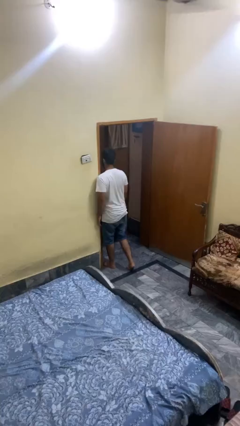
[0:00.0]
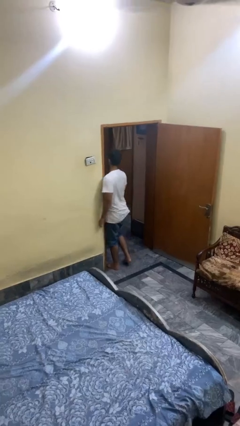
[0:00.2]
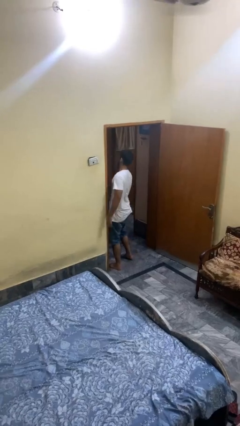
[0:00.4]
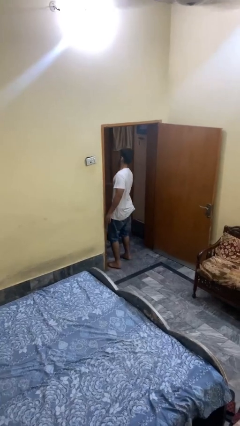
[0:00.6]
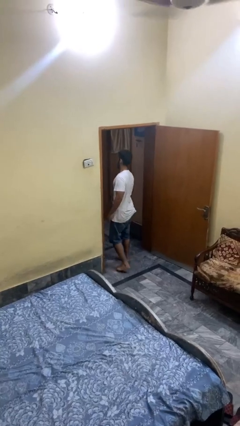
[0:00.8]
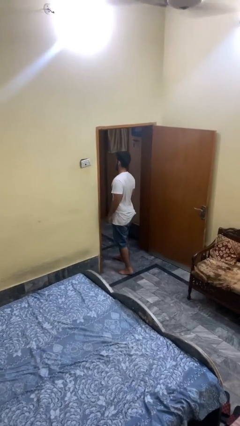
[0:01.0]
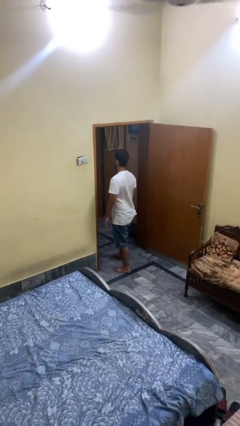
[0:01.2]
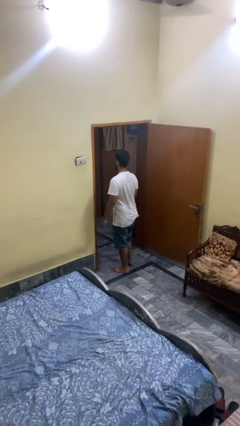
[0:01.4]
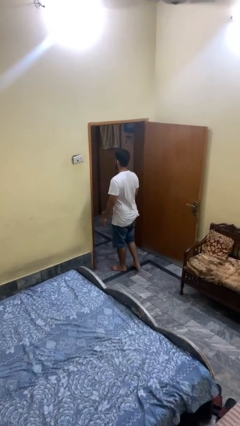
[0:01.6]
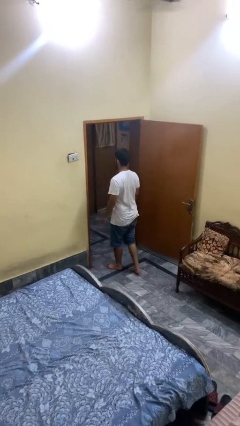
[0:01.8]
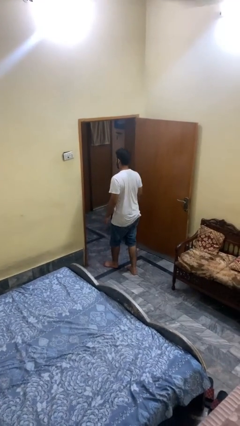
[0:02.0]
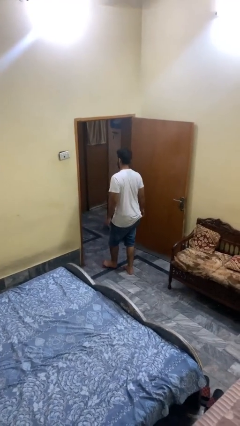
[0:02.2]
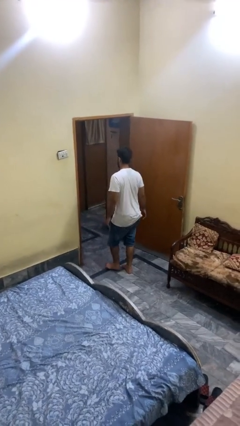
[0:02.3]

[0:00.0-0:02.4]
person bumps into wall

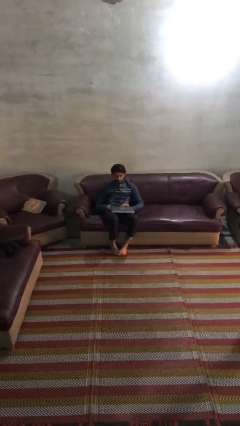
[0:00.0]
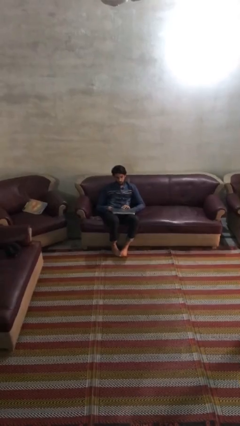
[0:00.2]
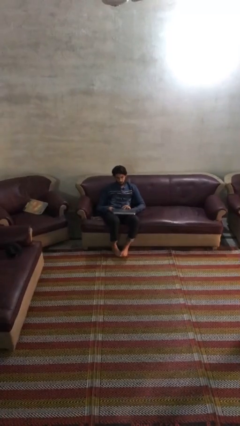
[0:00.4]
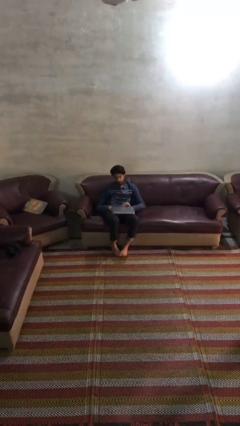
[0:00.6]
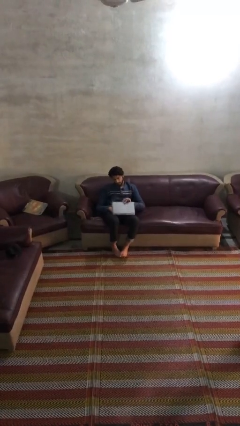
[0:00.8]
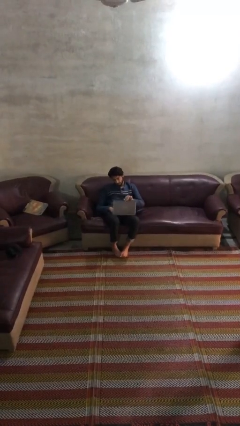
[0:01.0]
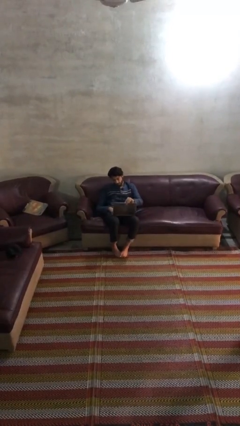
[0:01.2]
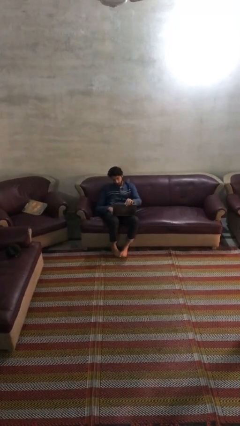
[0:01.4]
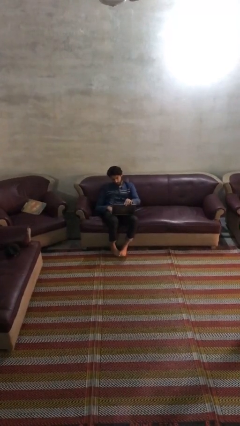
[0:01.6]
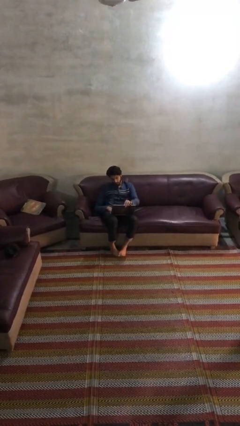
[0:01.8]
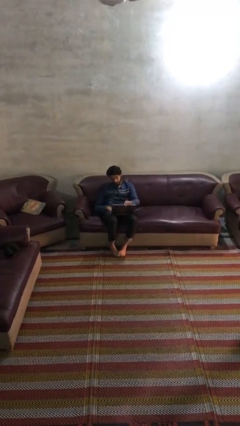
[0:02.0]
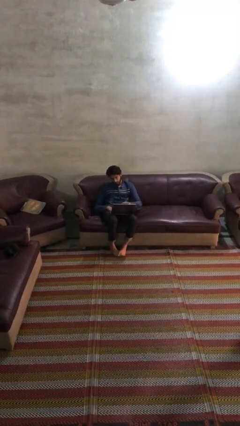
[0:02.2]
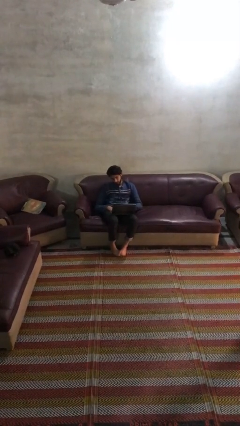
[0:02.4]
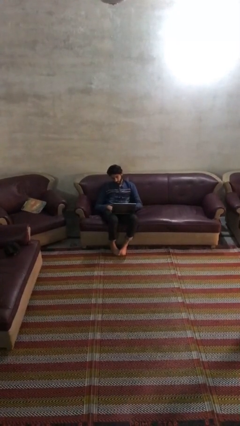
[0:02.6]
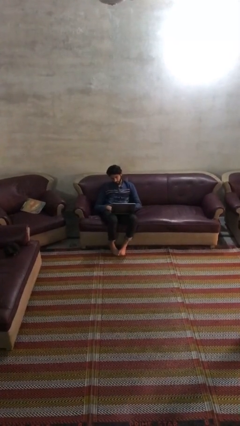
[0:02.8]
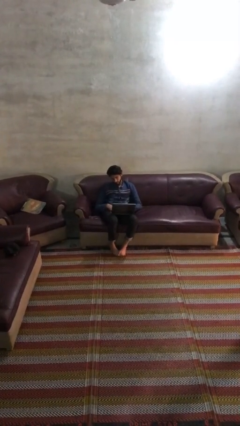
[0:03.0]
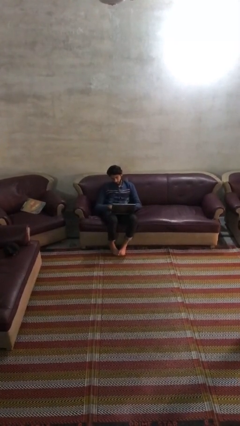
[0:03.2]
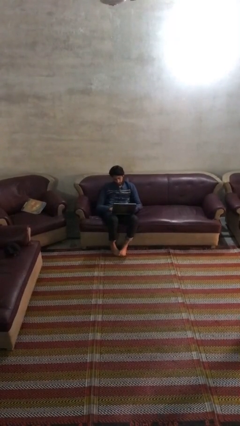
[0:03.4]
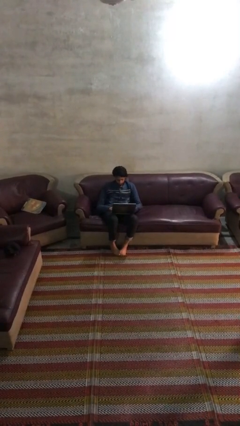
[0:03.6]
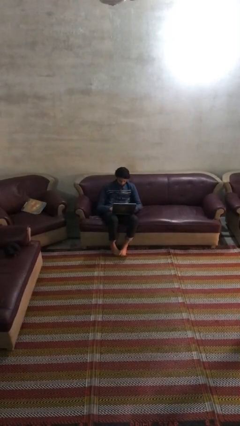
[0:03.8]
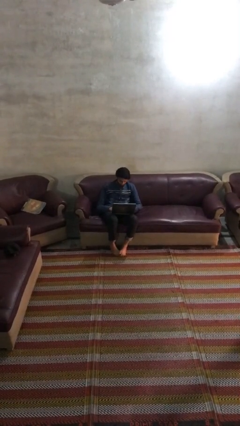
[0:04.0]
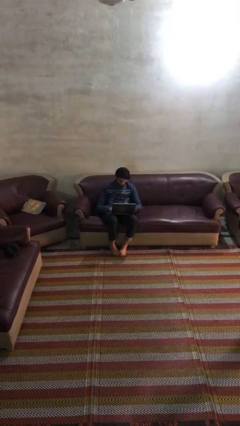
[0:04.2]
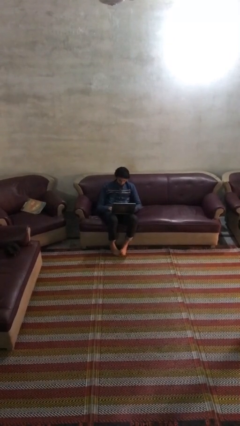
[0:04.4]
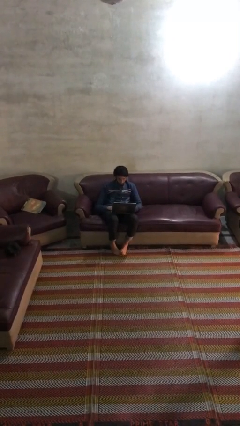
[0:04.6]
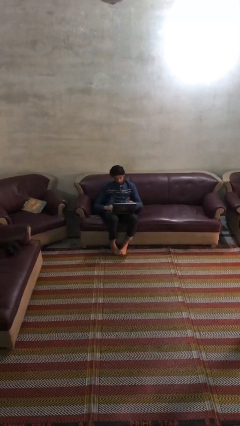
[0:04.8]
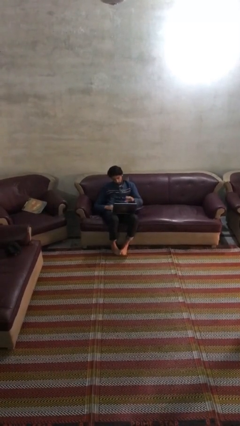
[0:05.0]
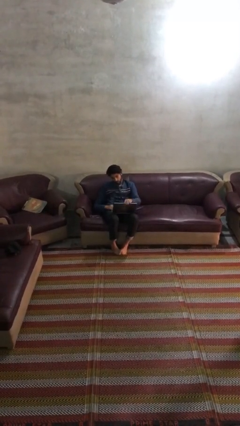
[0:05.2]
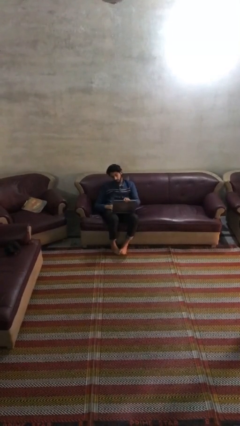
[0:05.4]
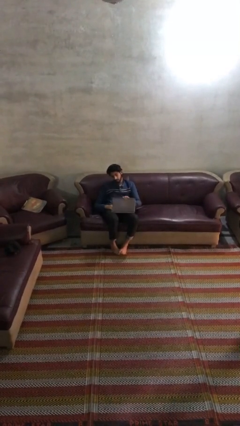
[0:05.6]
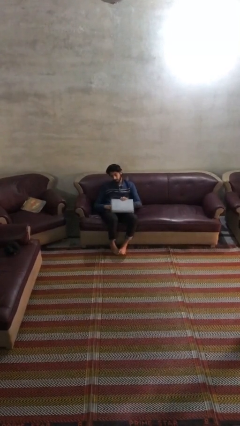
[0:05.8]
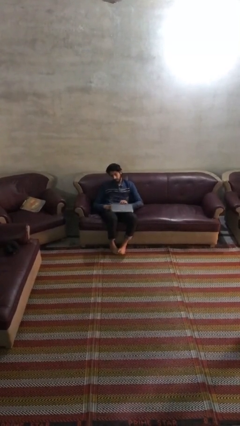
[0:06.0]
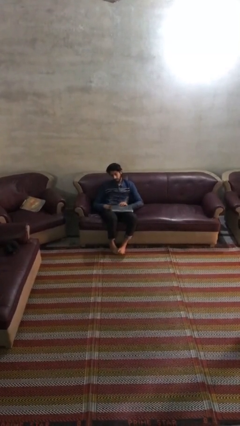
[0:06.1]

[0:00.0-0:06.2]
person interacts with laptop

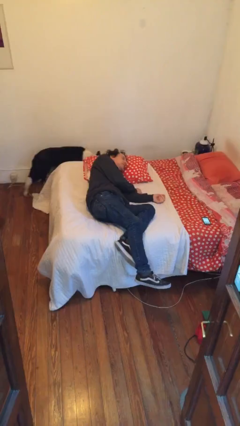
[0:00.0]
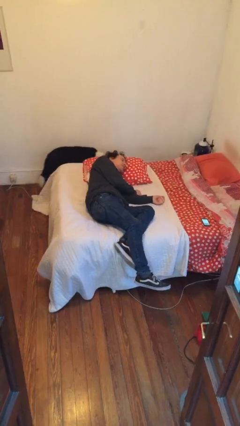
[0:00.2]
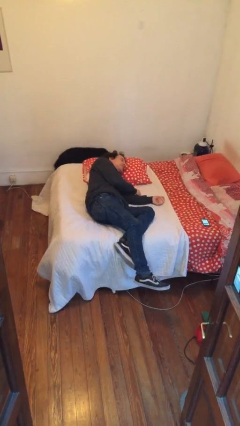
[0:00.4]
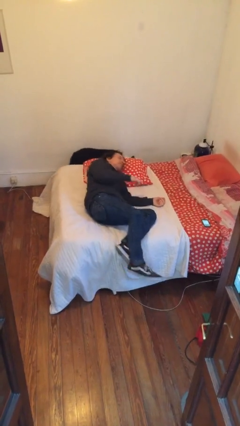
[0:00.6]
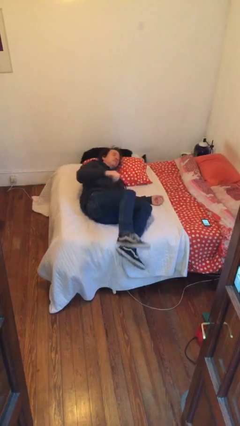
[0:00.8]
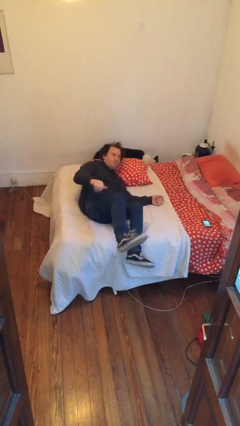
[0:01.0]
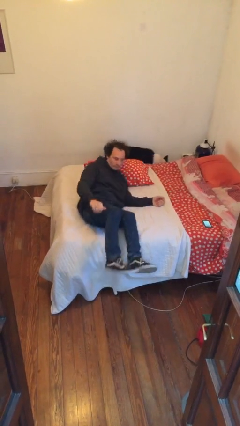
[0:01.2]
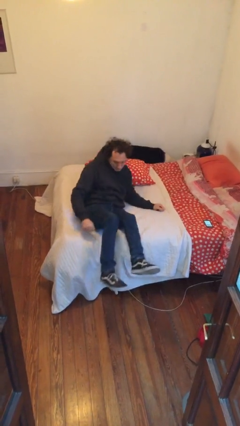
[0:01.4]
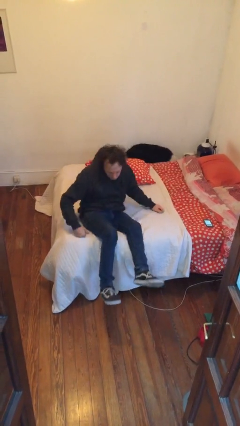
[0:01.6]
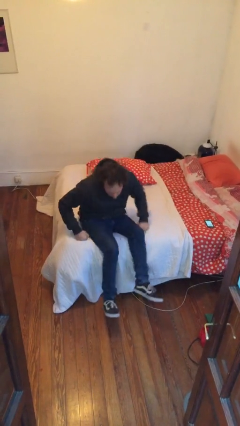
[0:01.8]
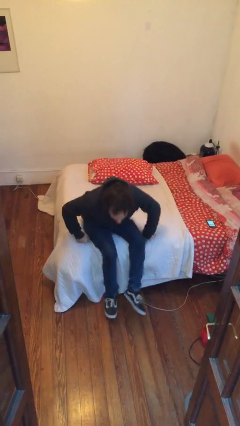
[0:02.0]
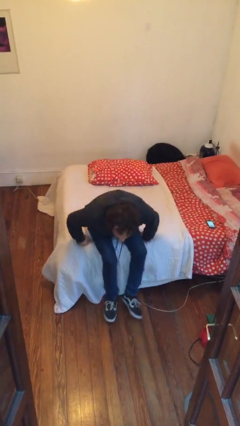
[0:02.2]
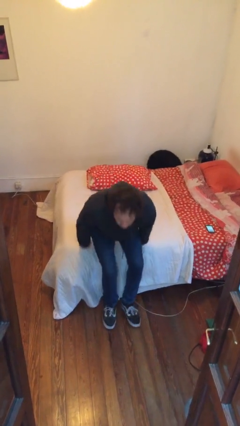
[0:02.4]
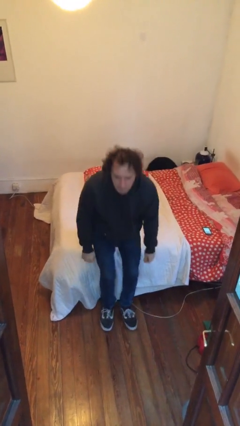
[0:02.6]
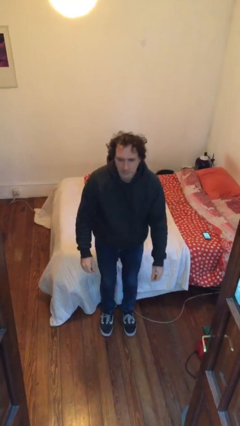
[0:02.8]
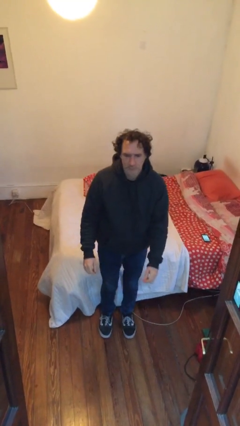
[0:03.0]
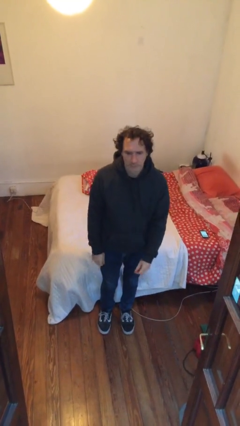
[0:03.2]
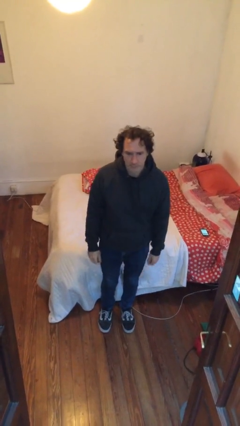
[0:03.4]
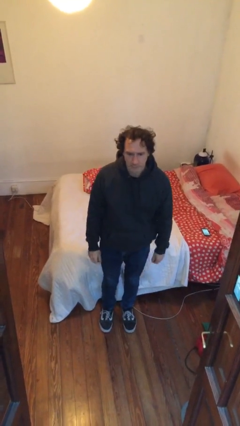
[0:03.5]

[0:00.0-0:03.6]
person stands up

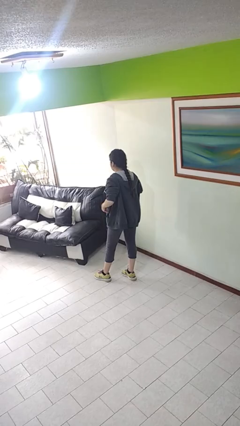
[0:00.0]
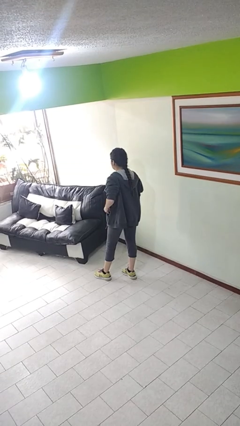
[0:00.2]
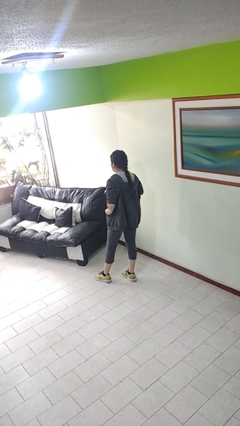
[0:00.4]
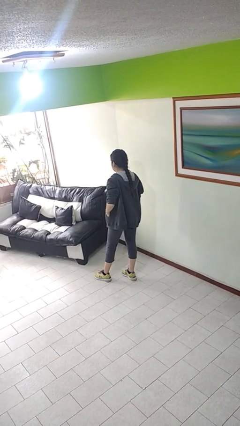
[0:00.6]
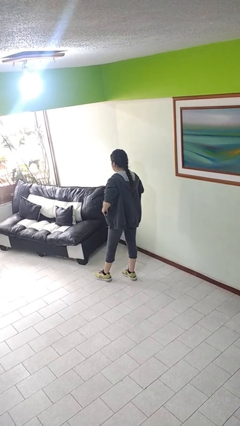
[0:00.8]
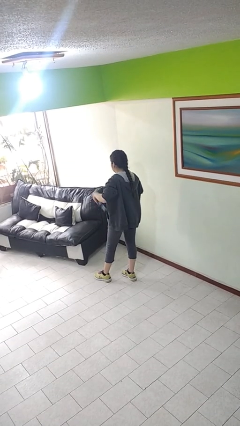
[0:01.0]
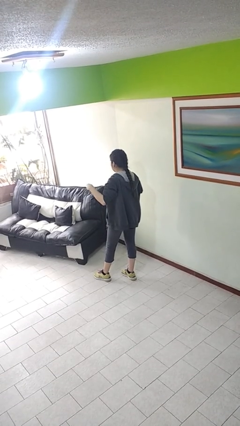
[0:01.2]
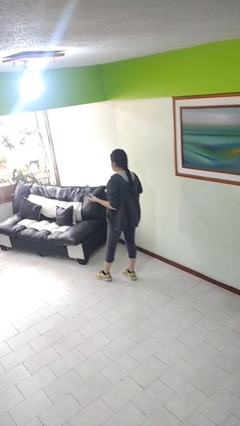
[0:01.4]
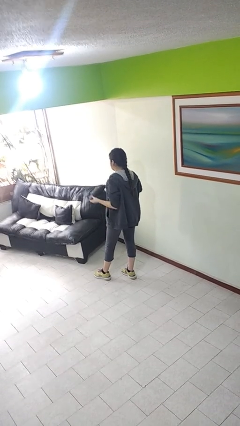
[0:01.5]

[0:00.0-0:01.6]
person takes phone from pocket

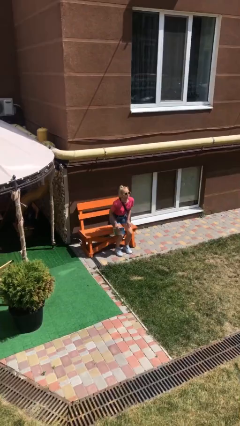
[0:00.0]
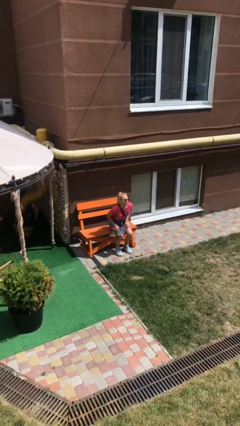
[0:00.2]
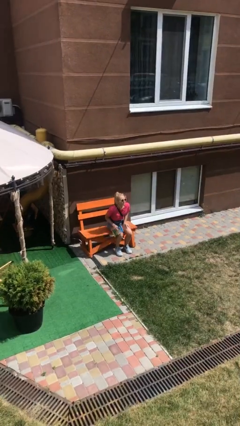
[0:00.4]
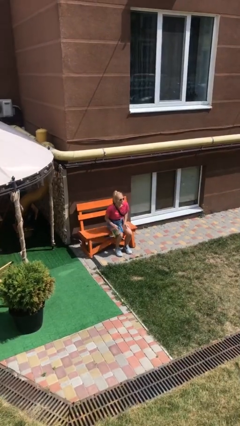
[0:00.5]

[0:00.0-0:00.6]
person sits down

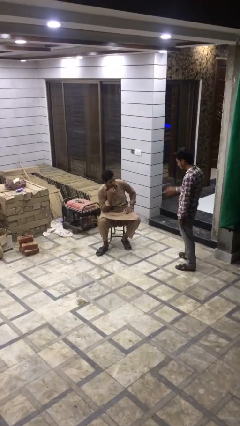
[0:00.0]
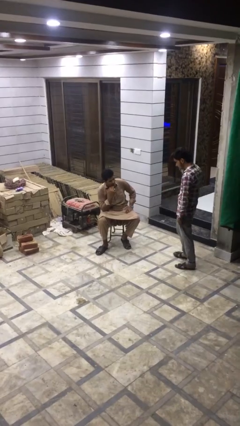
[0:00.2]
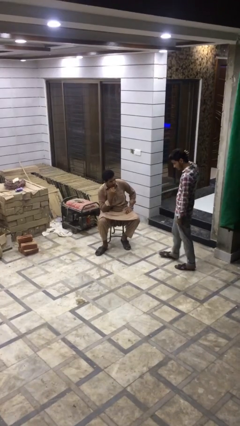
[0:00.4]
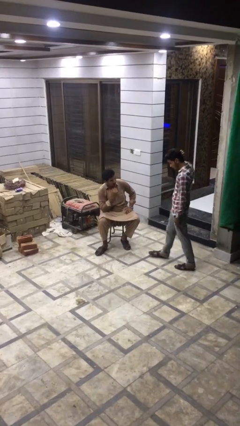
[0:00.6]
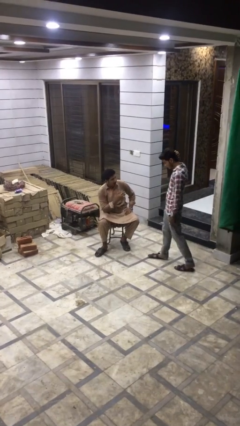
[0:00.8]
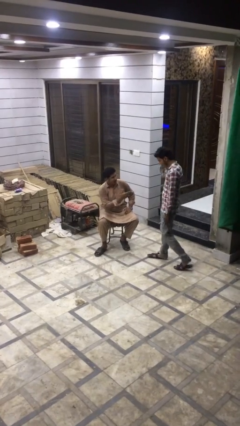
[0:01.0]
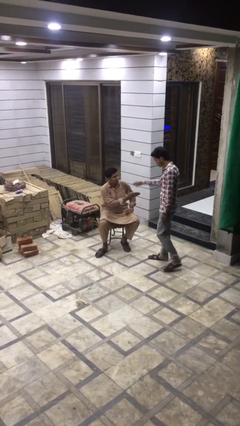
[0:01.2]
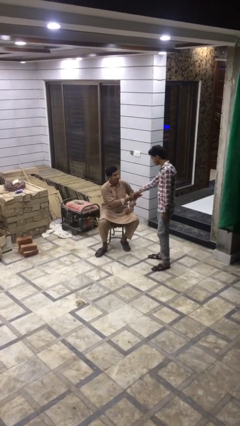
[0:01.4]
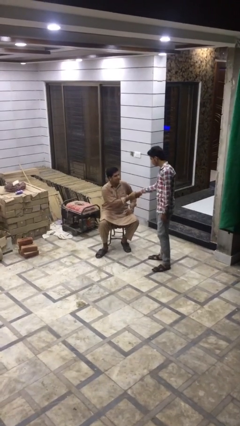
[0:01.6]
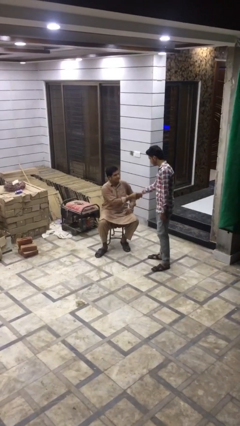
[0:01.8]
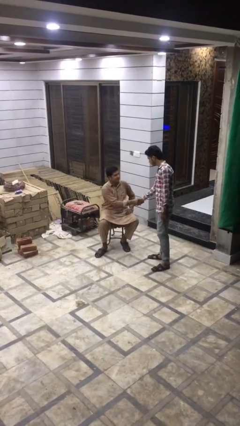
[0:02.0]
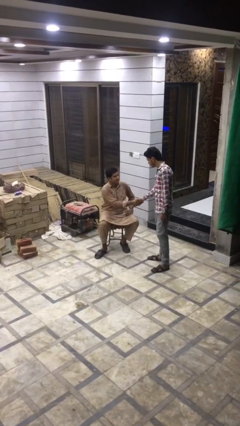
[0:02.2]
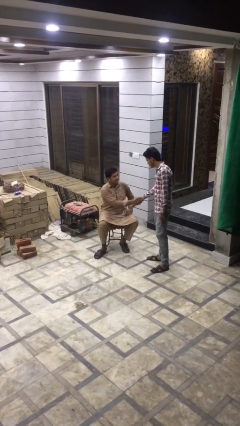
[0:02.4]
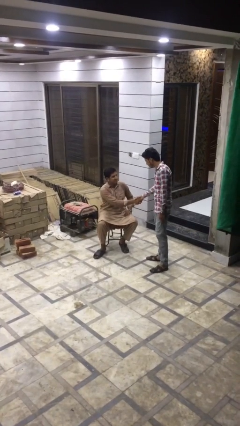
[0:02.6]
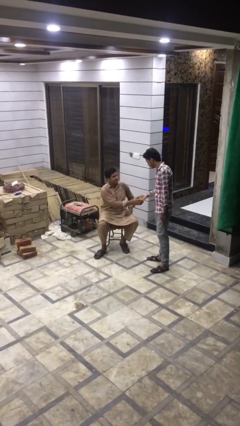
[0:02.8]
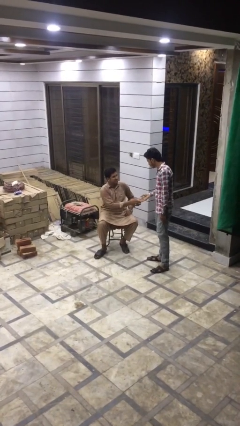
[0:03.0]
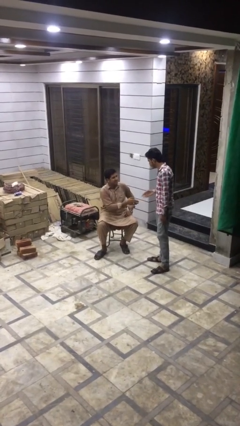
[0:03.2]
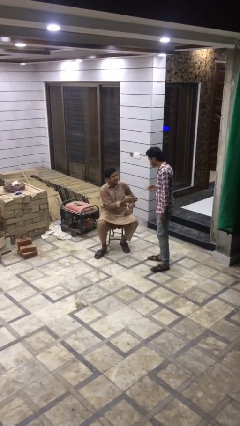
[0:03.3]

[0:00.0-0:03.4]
person shakes hand
